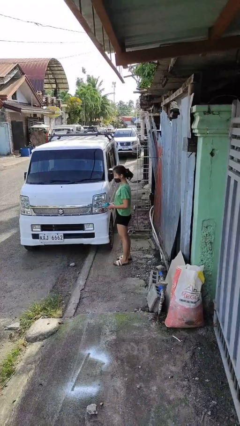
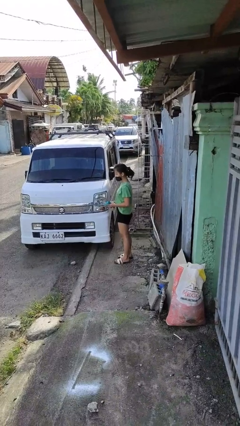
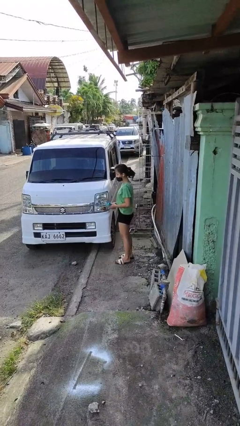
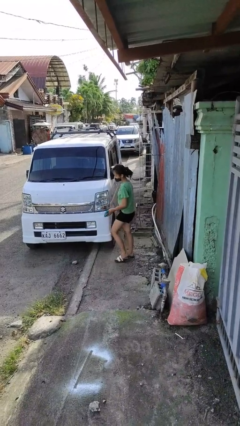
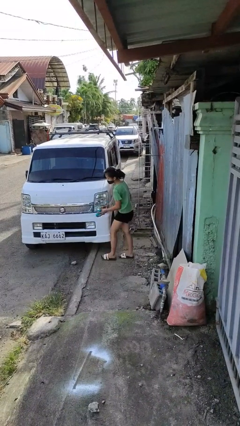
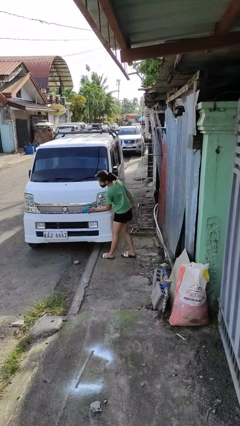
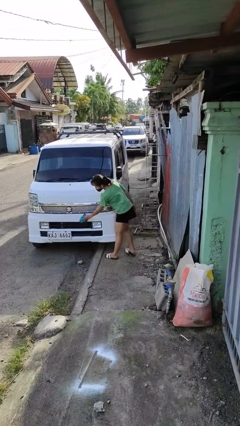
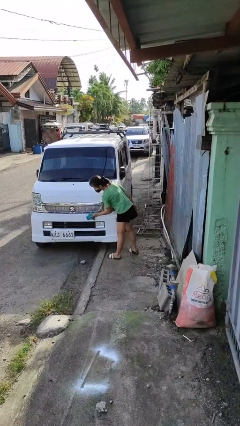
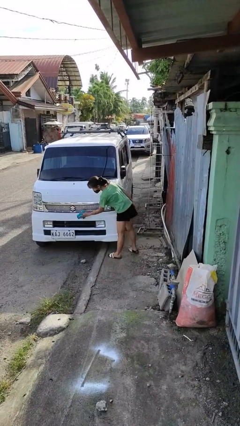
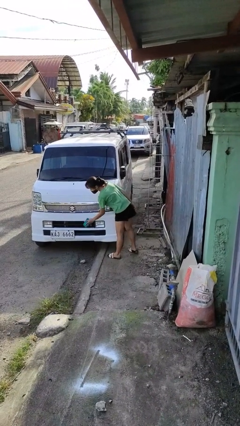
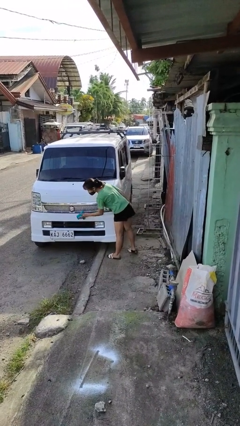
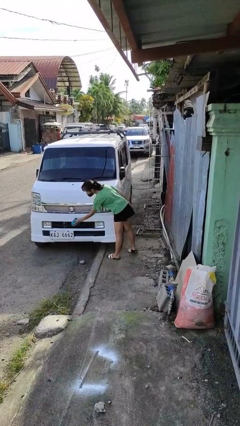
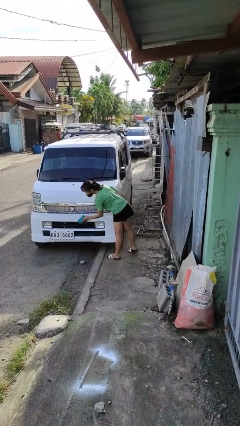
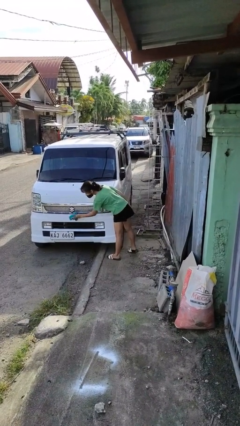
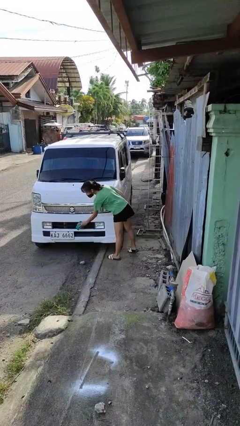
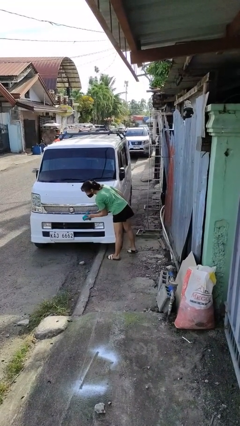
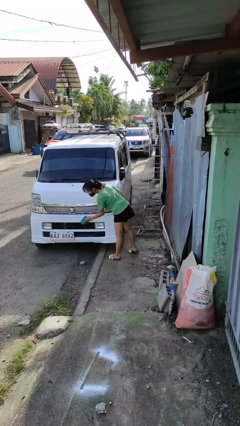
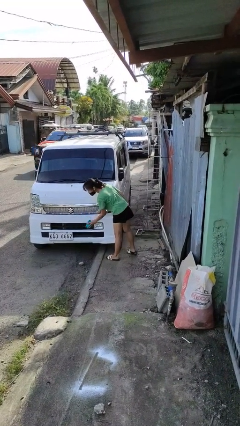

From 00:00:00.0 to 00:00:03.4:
person polishes car with rag

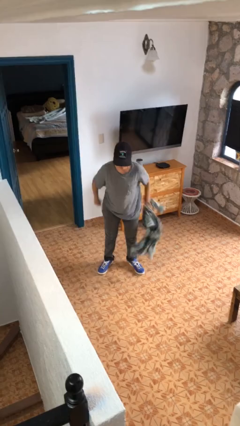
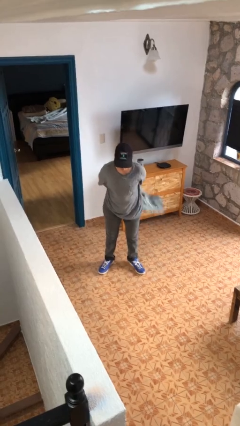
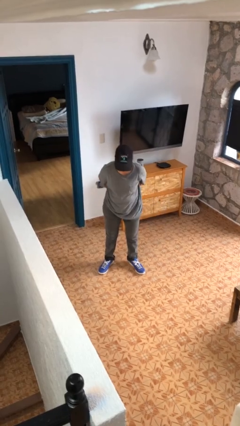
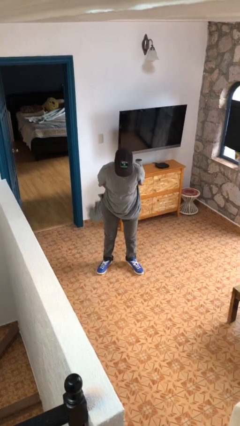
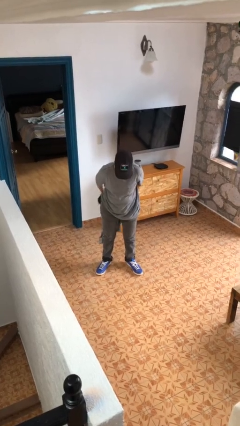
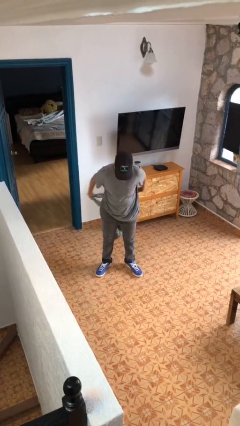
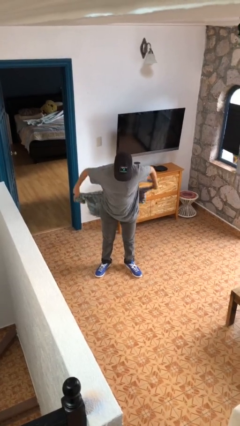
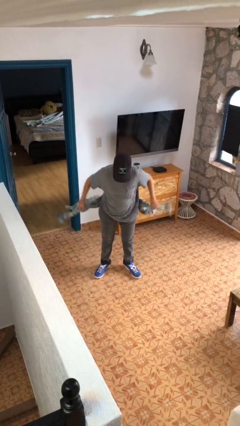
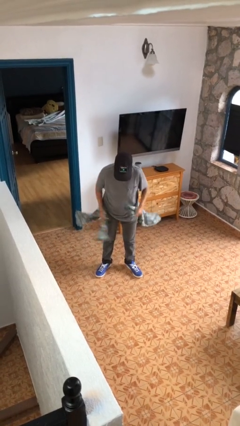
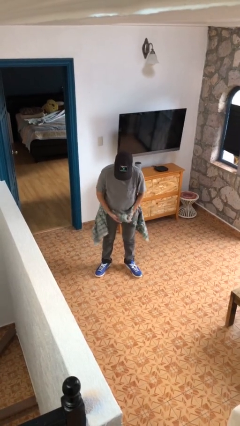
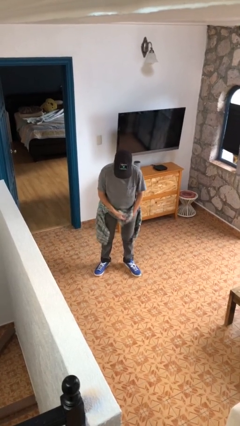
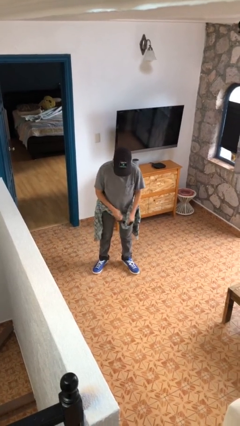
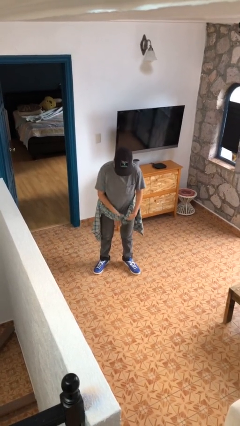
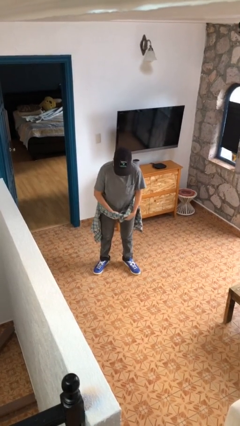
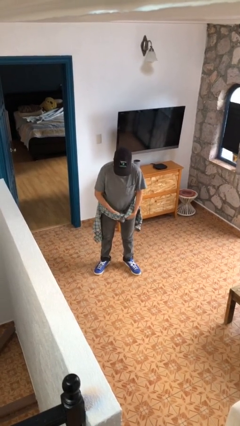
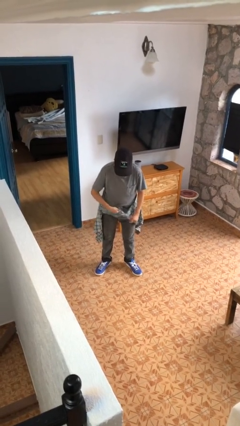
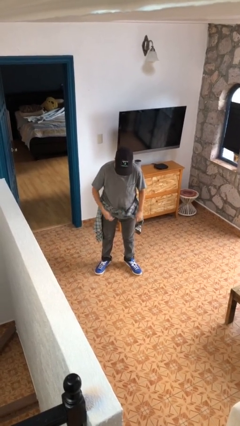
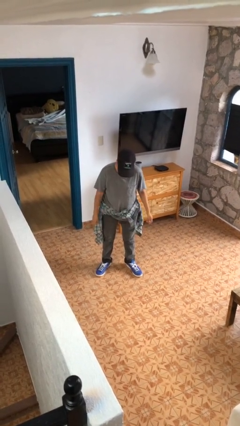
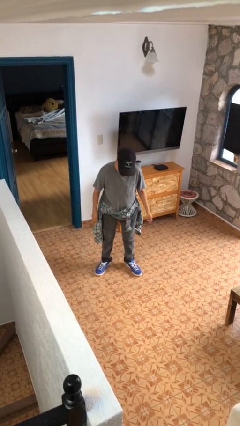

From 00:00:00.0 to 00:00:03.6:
person ties jacket around waist

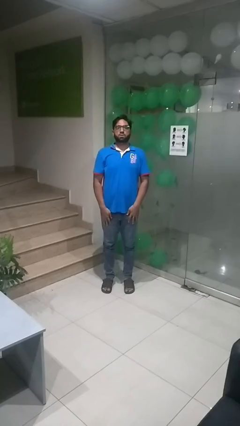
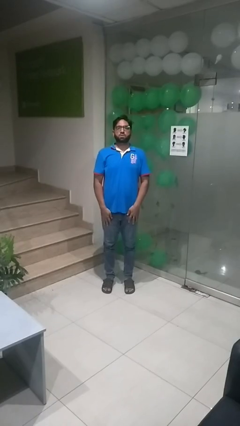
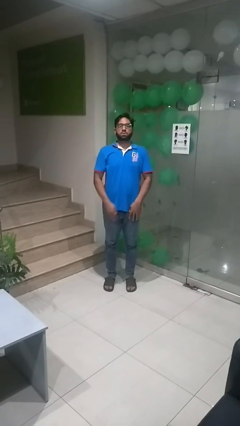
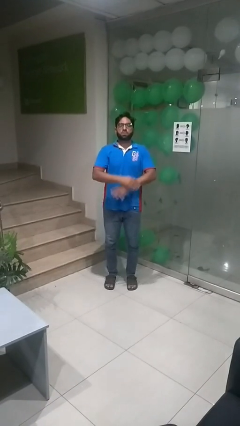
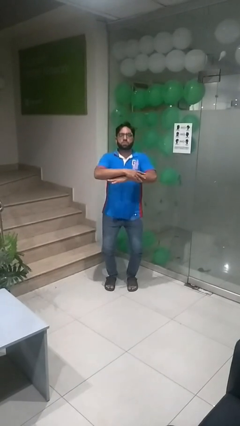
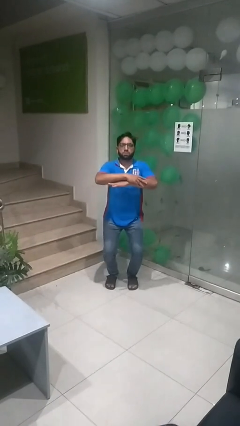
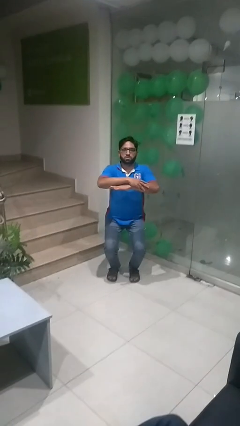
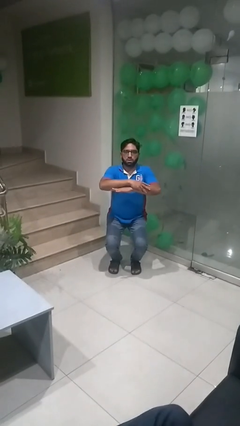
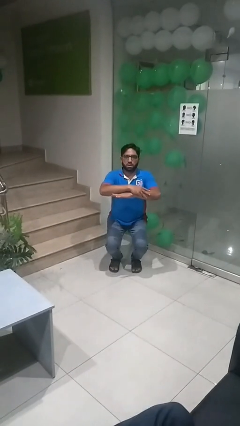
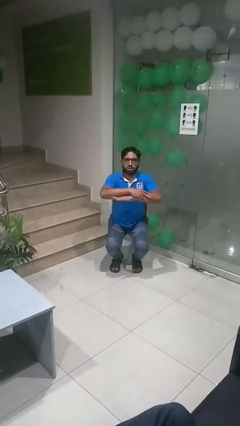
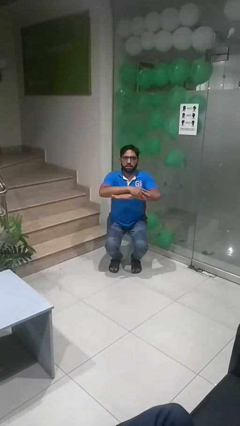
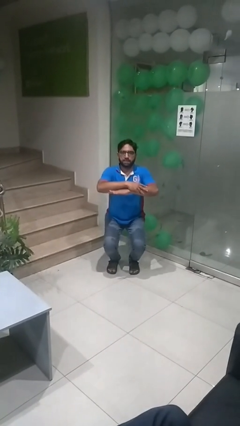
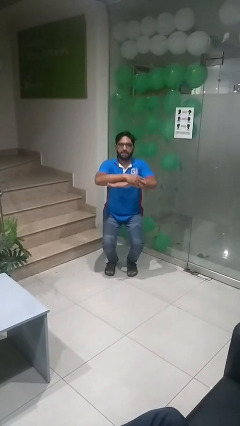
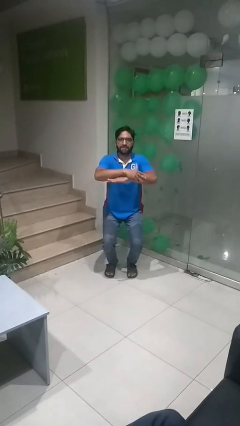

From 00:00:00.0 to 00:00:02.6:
person squats

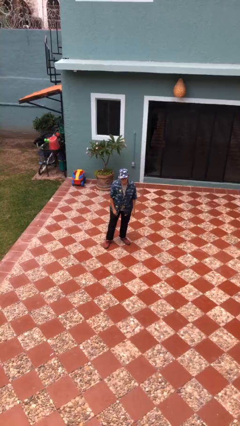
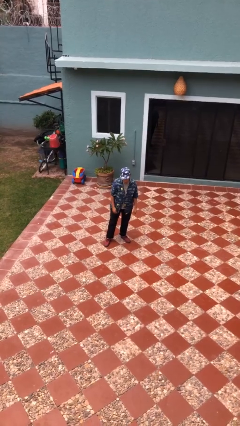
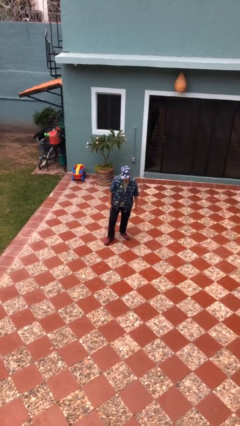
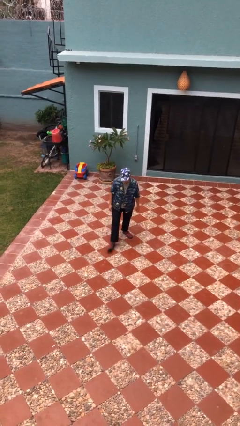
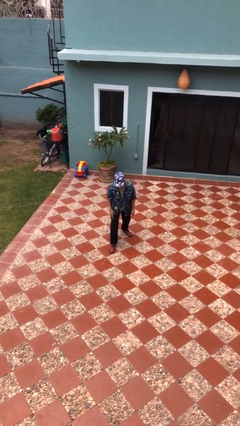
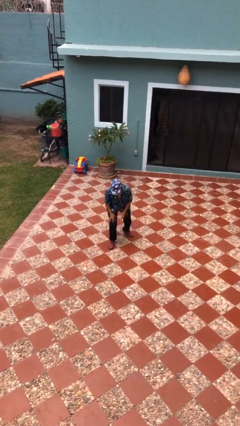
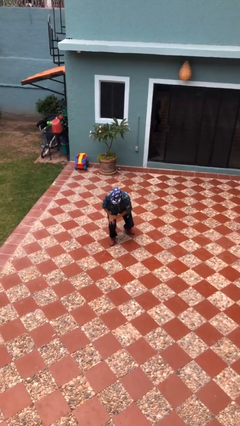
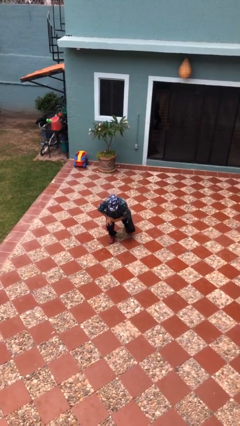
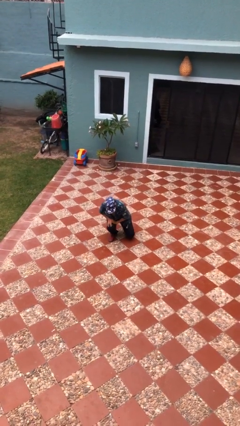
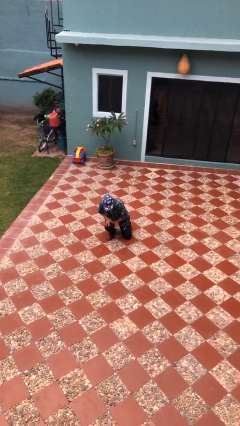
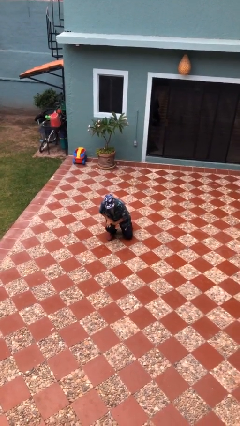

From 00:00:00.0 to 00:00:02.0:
person kneels

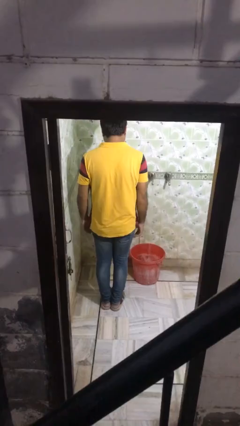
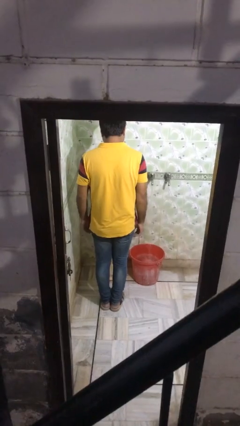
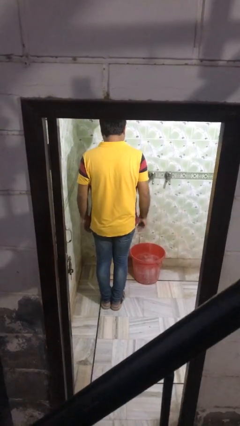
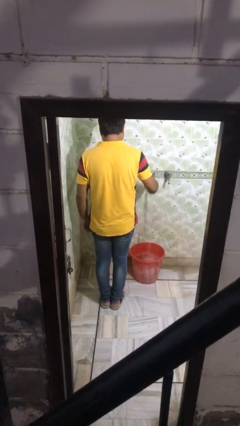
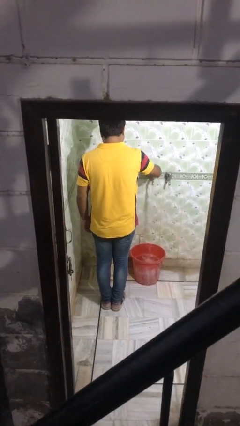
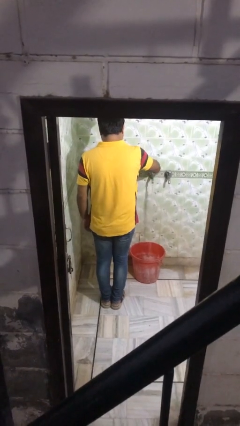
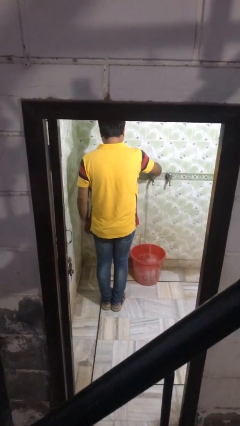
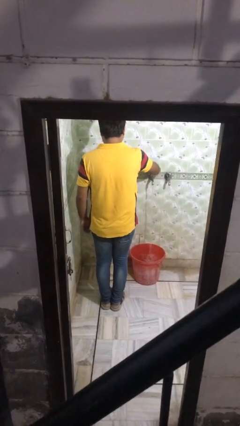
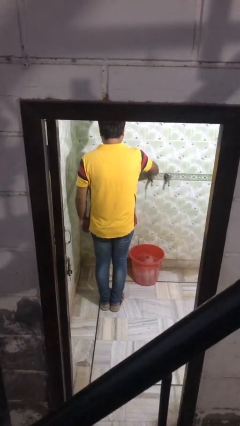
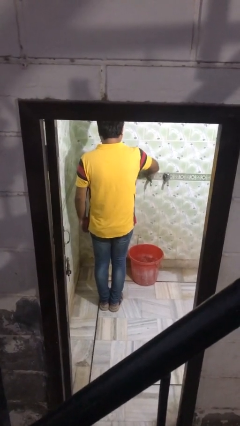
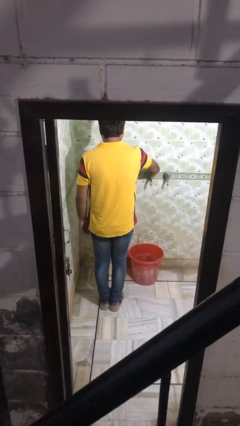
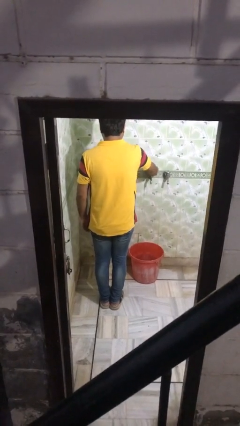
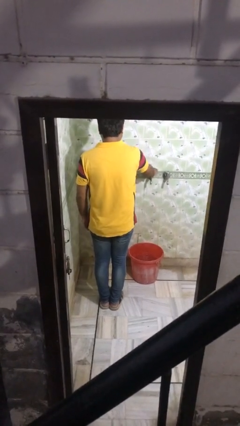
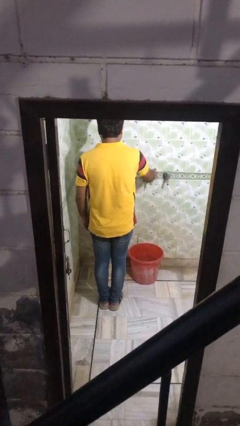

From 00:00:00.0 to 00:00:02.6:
person turns off faucet

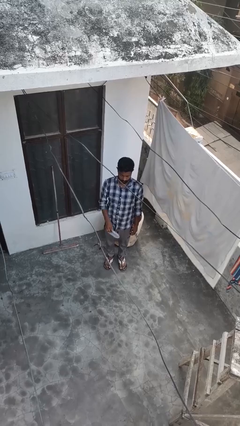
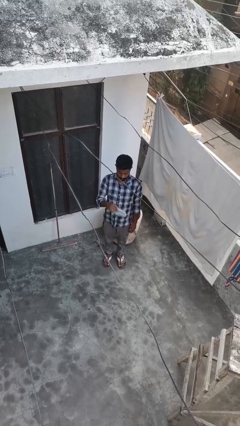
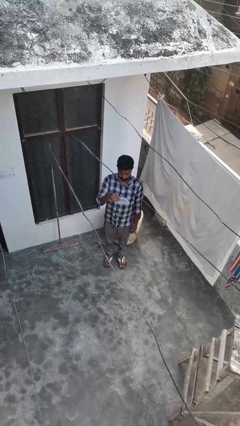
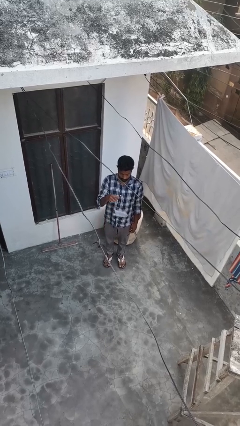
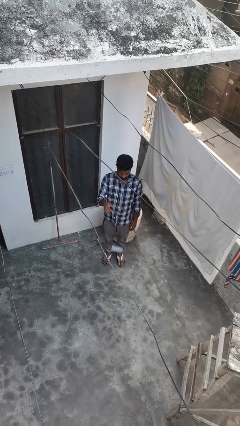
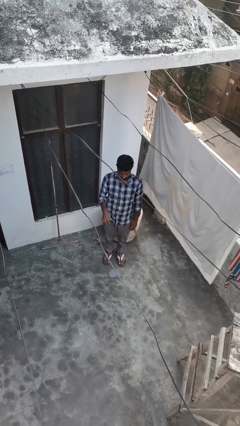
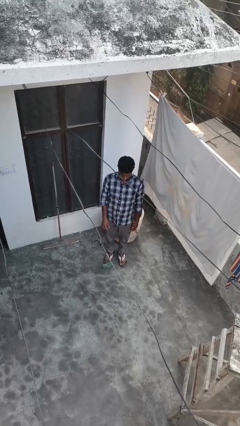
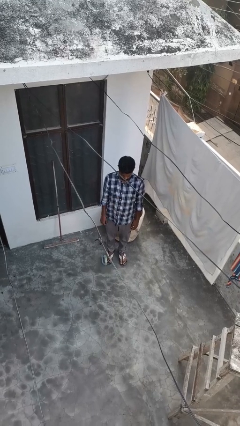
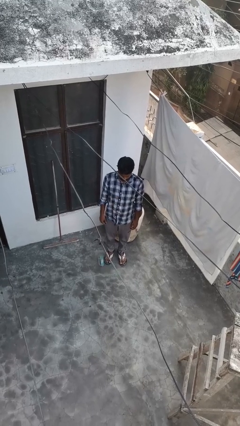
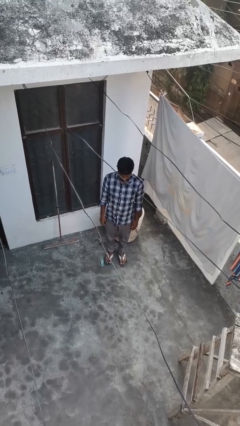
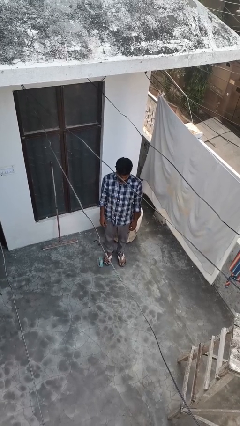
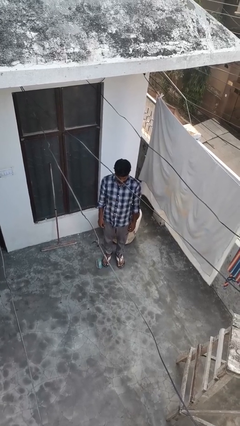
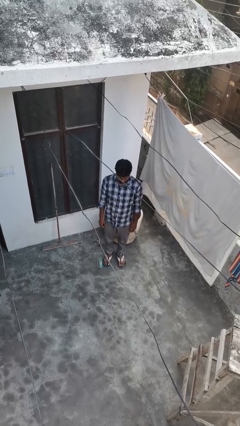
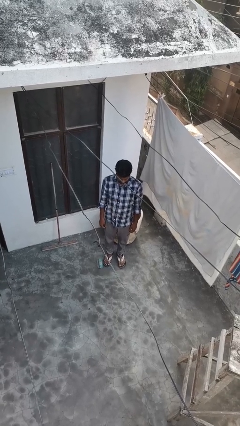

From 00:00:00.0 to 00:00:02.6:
person throws object into air

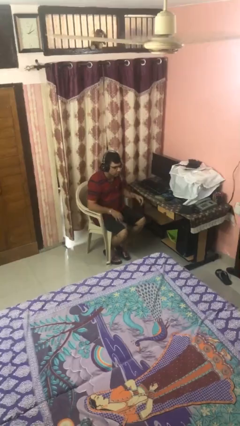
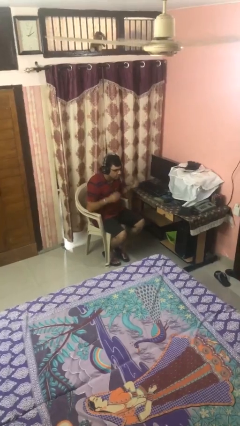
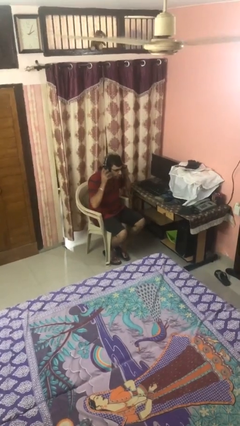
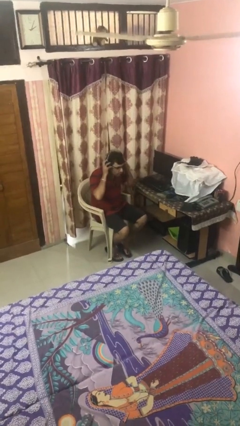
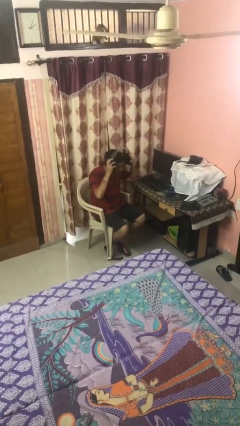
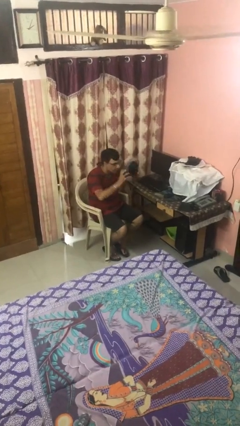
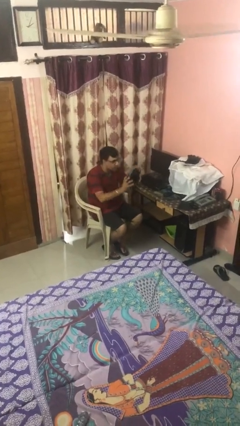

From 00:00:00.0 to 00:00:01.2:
person takes off headphones
